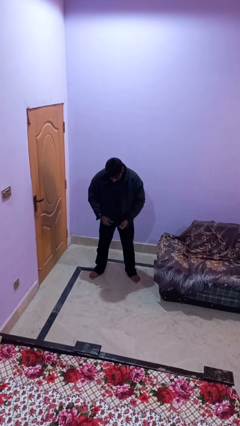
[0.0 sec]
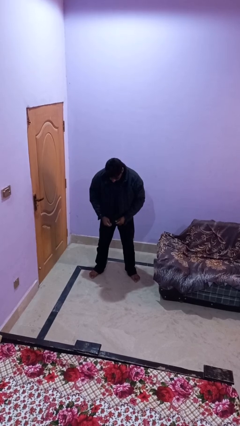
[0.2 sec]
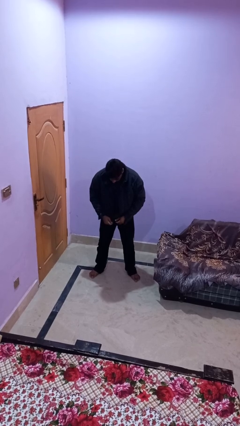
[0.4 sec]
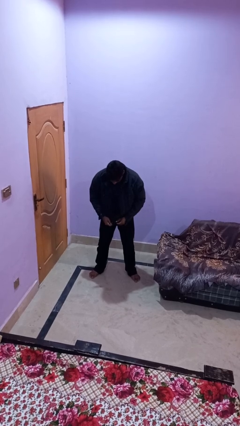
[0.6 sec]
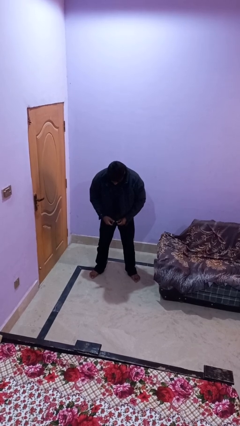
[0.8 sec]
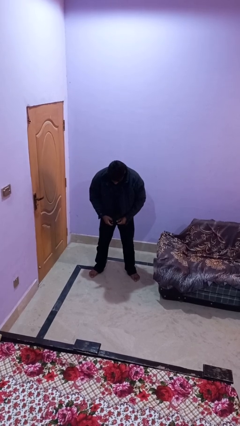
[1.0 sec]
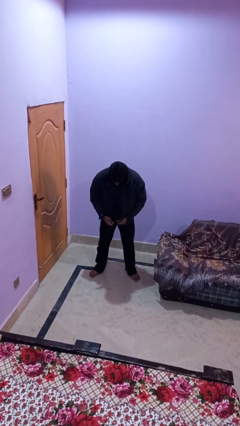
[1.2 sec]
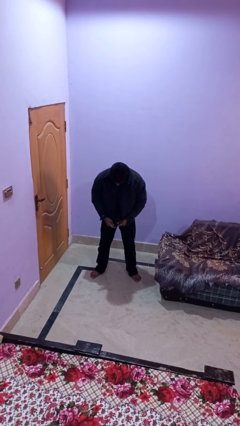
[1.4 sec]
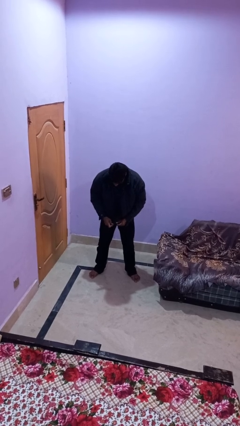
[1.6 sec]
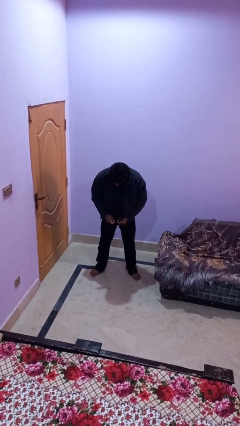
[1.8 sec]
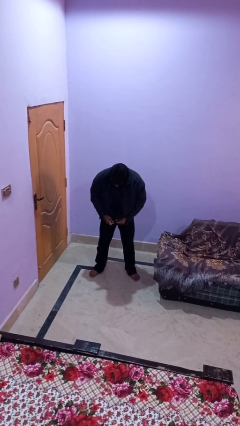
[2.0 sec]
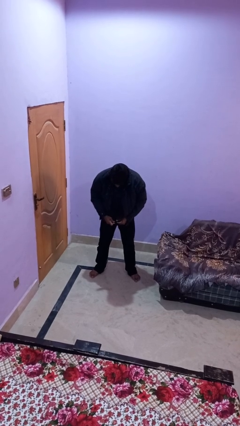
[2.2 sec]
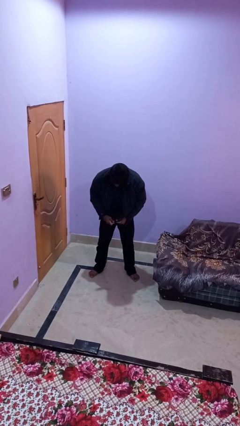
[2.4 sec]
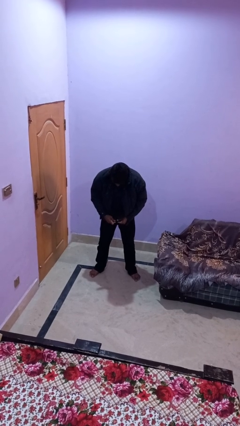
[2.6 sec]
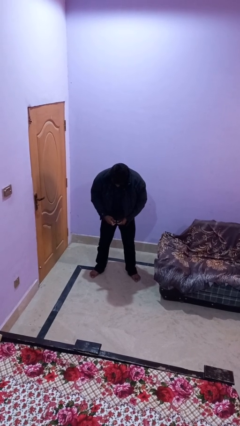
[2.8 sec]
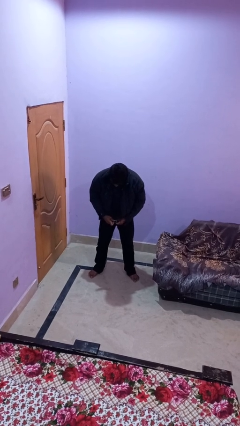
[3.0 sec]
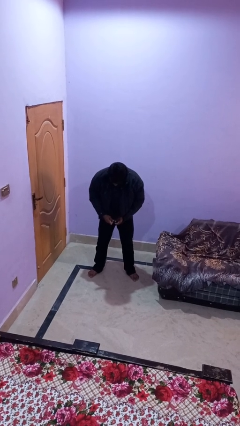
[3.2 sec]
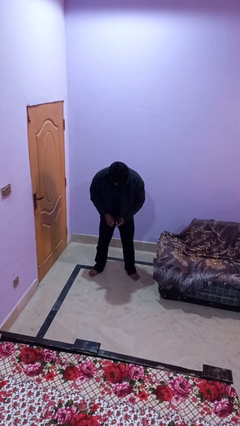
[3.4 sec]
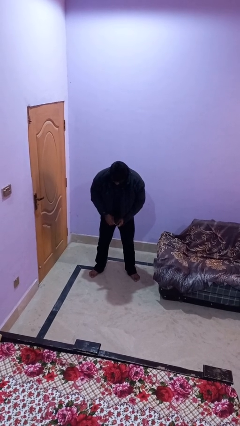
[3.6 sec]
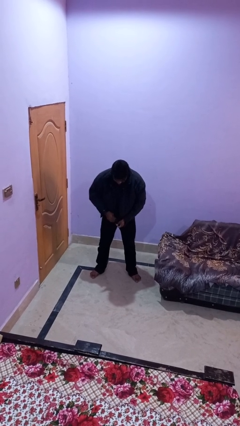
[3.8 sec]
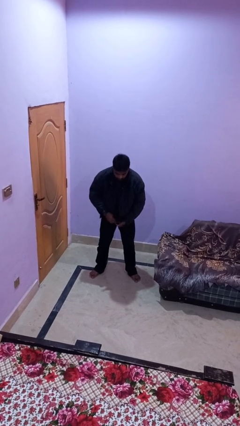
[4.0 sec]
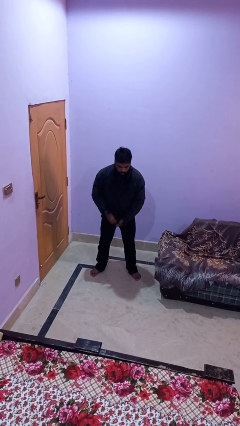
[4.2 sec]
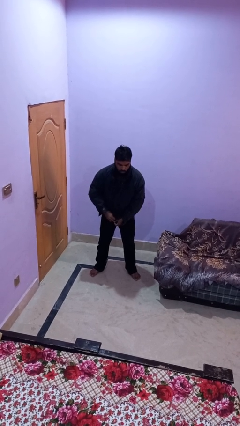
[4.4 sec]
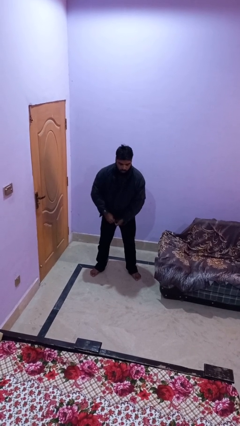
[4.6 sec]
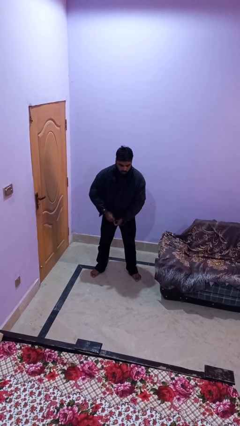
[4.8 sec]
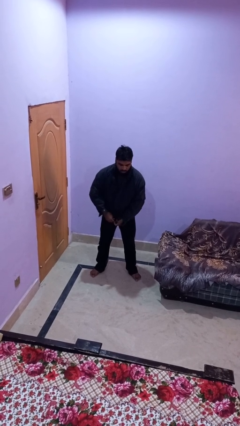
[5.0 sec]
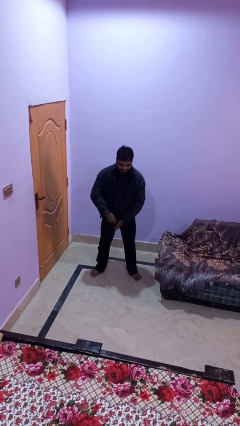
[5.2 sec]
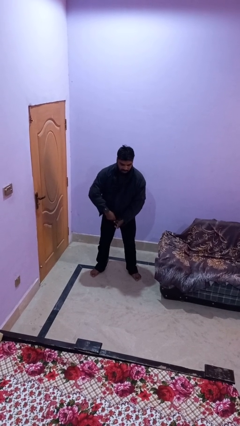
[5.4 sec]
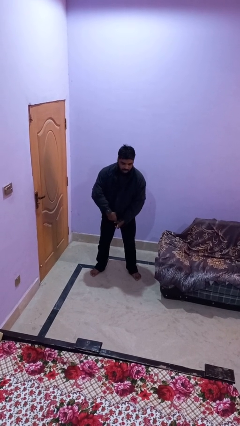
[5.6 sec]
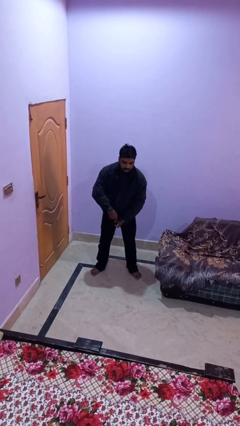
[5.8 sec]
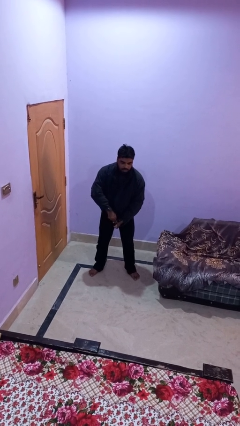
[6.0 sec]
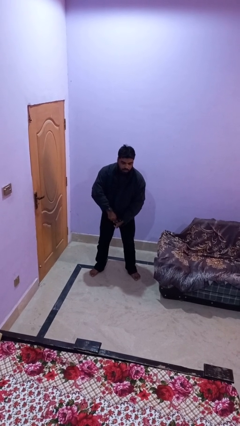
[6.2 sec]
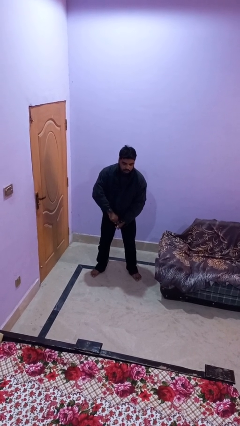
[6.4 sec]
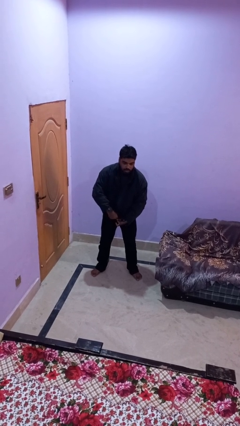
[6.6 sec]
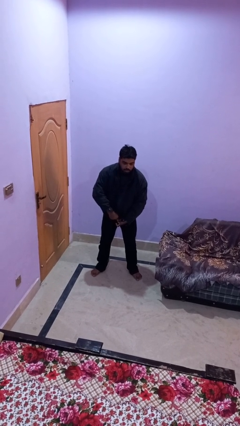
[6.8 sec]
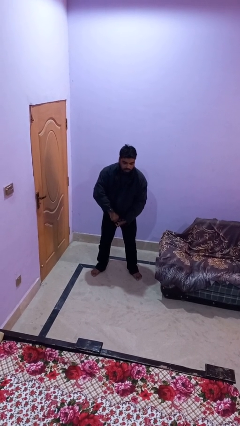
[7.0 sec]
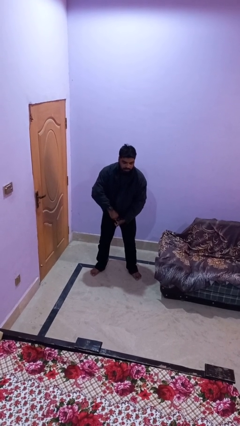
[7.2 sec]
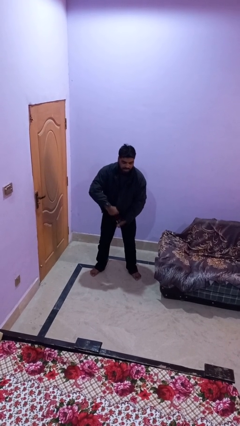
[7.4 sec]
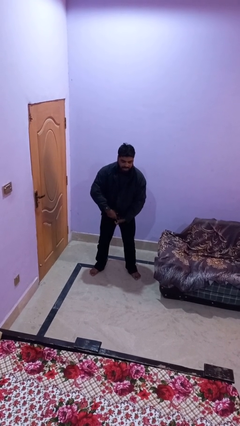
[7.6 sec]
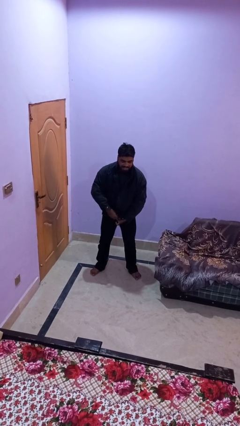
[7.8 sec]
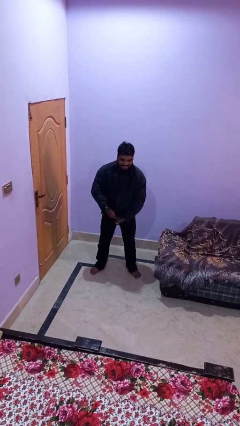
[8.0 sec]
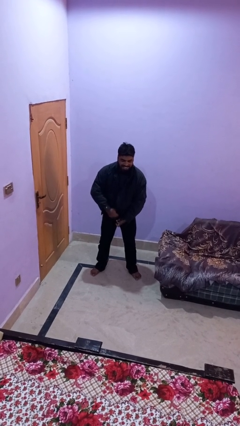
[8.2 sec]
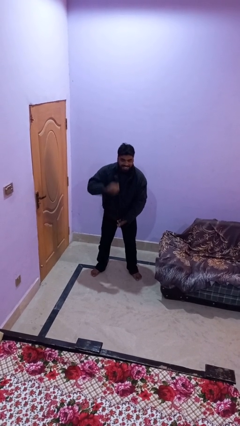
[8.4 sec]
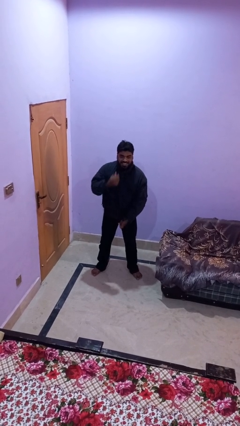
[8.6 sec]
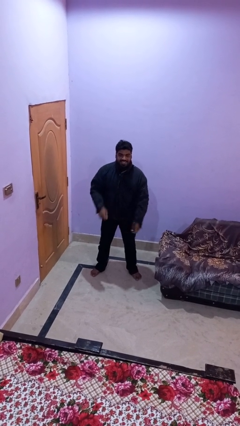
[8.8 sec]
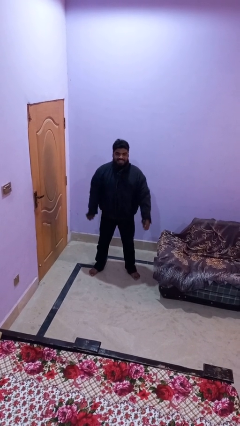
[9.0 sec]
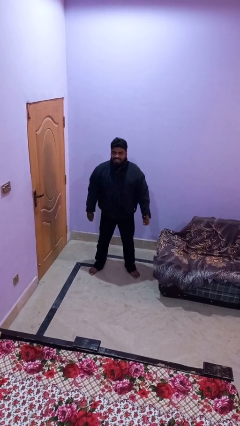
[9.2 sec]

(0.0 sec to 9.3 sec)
person zips up jacket

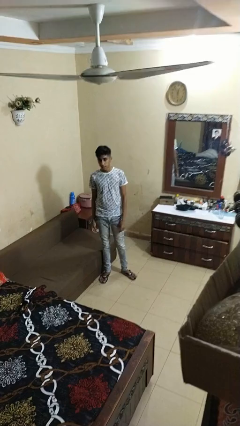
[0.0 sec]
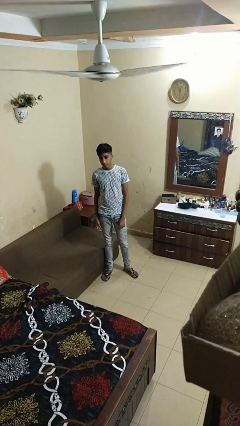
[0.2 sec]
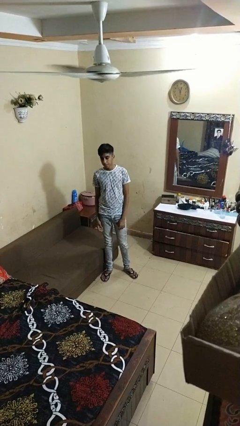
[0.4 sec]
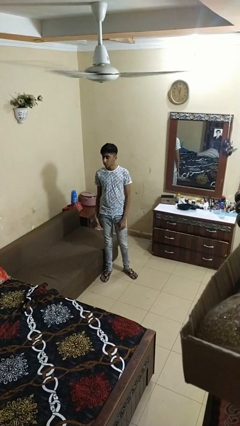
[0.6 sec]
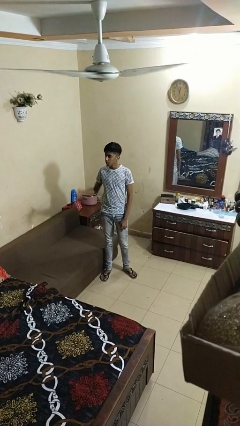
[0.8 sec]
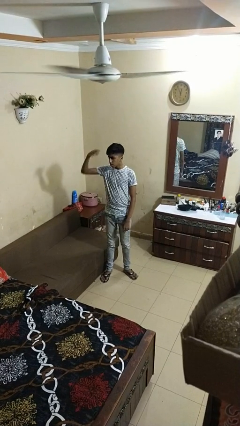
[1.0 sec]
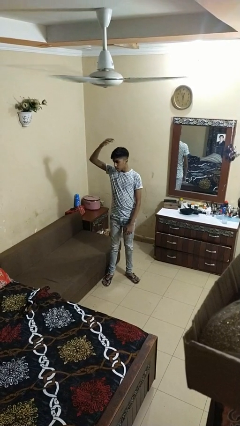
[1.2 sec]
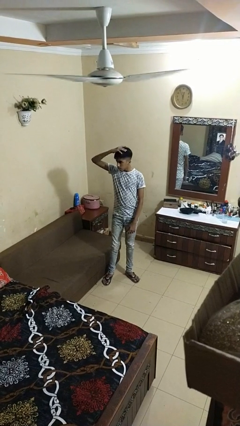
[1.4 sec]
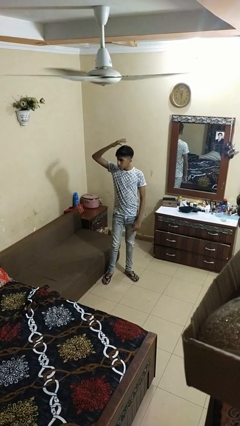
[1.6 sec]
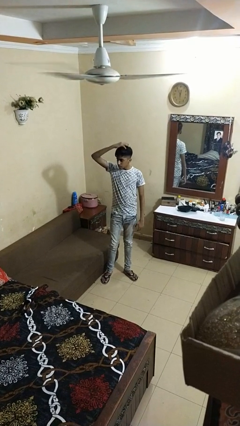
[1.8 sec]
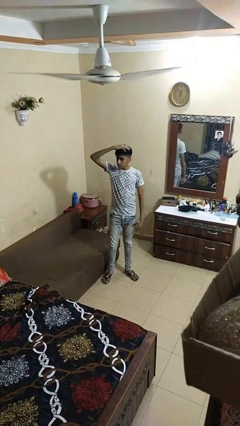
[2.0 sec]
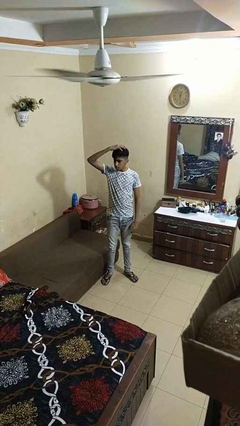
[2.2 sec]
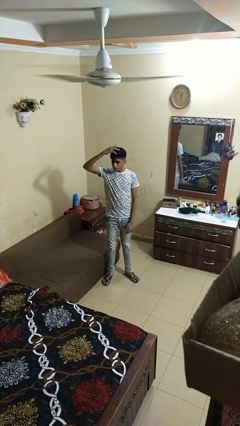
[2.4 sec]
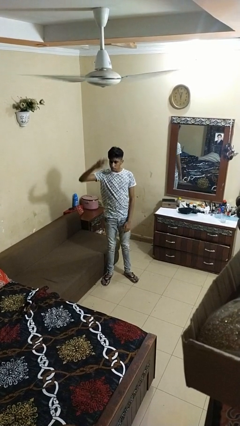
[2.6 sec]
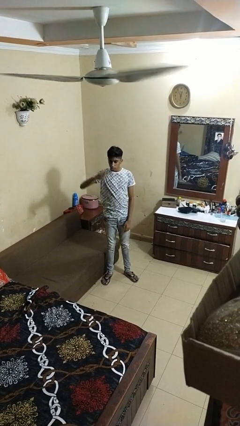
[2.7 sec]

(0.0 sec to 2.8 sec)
person pats head

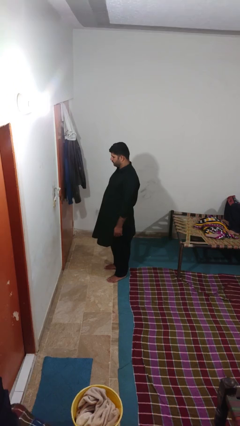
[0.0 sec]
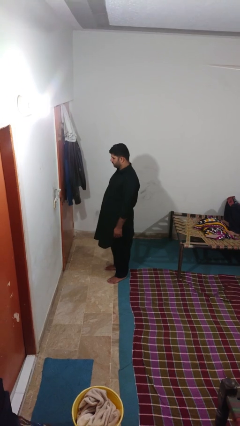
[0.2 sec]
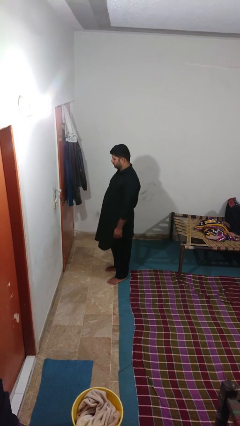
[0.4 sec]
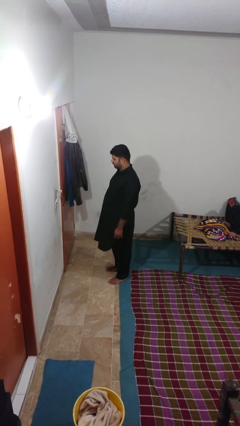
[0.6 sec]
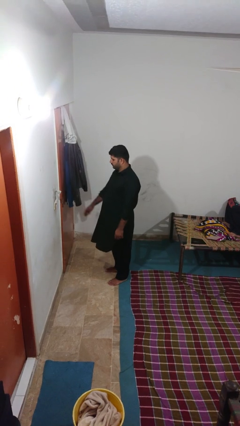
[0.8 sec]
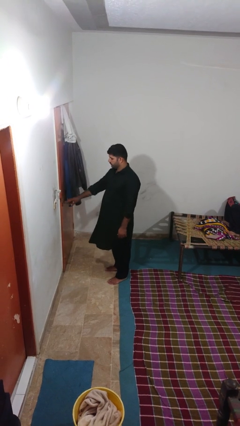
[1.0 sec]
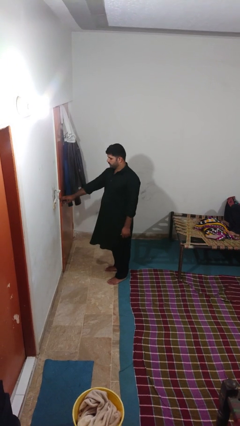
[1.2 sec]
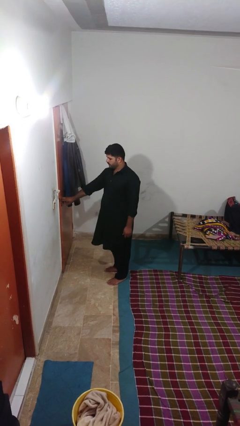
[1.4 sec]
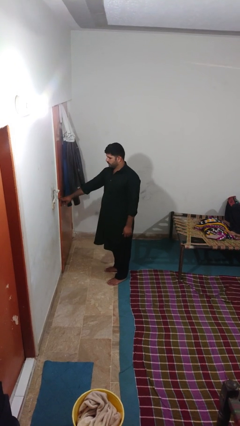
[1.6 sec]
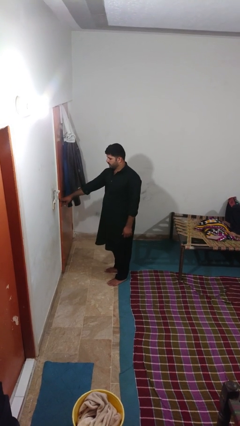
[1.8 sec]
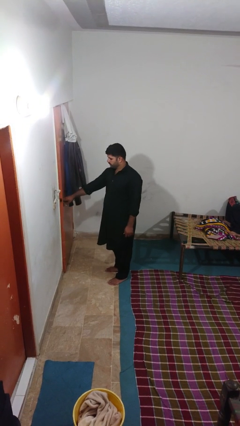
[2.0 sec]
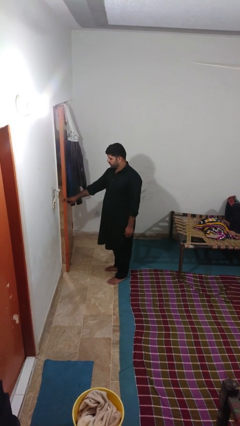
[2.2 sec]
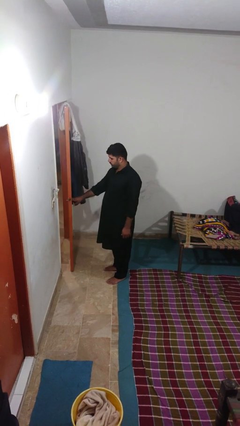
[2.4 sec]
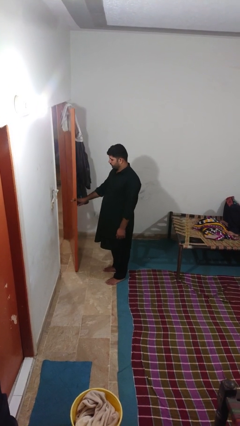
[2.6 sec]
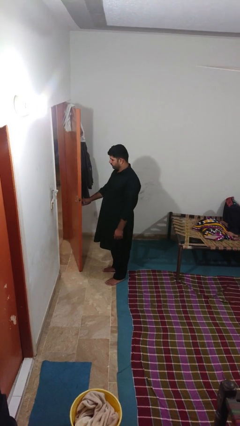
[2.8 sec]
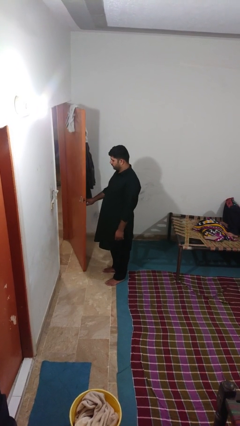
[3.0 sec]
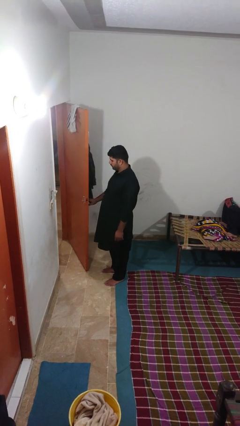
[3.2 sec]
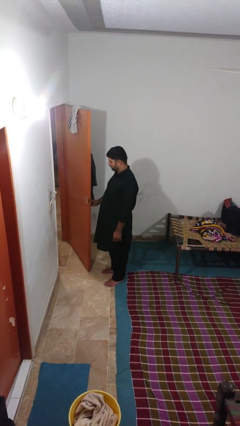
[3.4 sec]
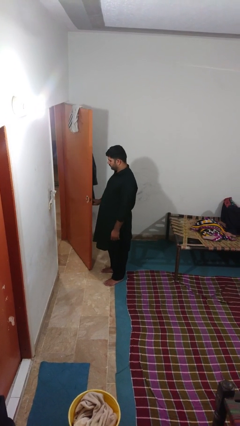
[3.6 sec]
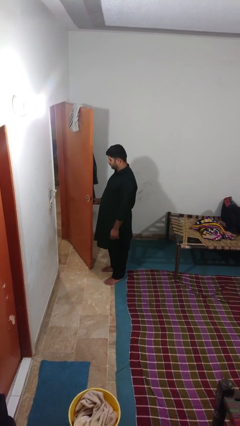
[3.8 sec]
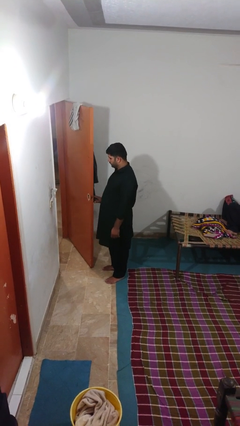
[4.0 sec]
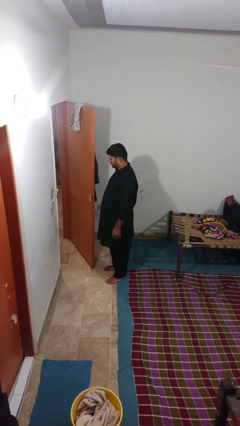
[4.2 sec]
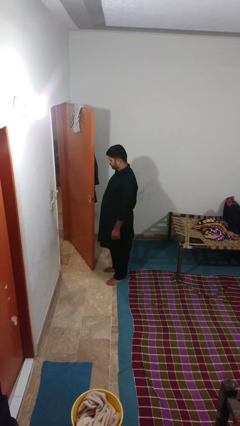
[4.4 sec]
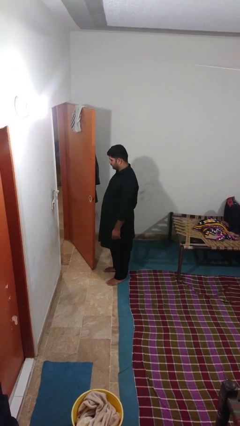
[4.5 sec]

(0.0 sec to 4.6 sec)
person opens facility door

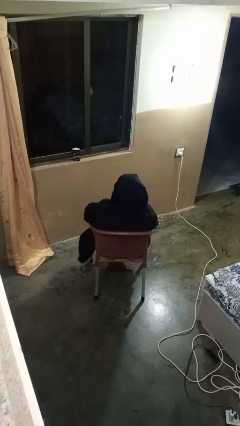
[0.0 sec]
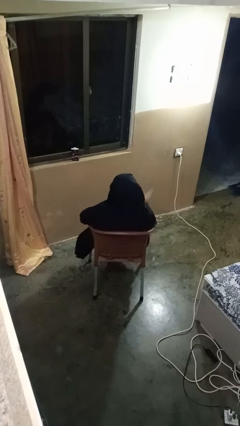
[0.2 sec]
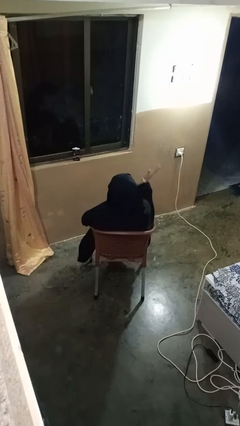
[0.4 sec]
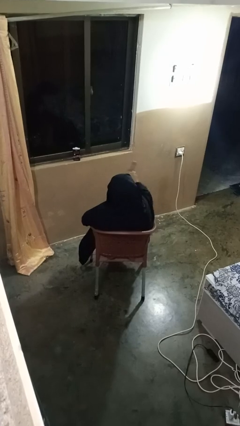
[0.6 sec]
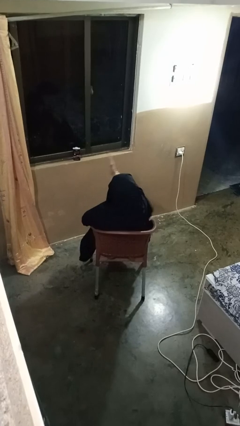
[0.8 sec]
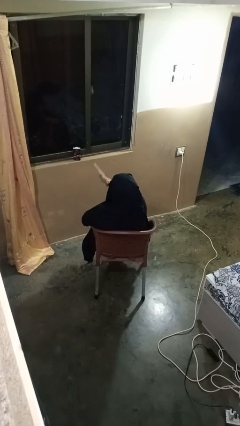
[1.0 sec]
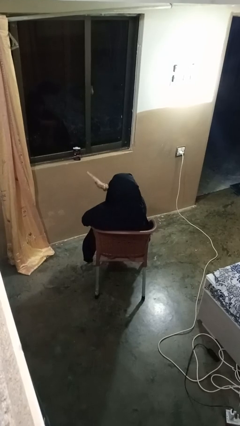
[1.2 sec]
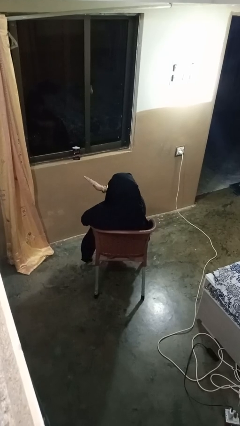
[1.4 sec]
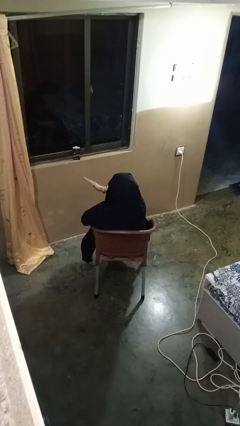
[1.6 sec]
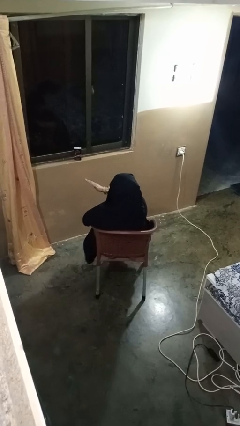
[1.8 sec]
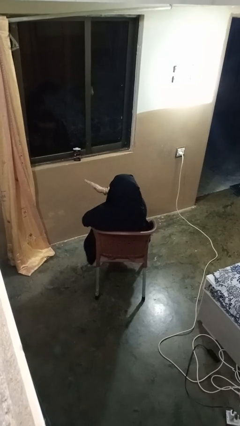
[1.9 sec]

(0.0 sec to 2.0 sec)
person gestures swipe left
